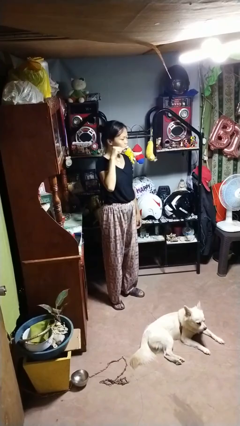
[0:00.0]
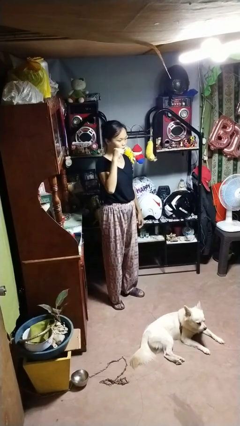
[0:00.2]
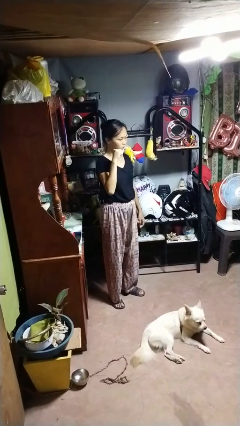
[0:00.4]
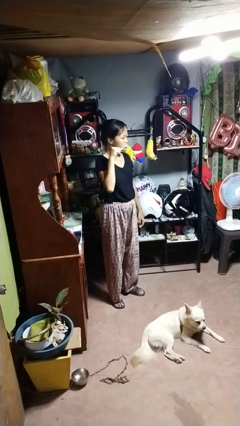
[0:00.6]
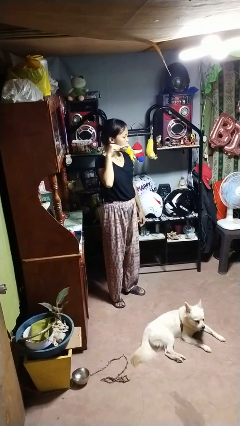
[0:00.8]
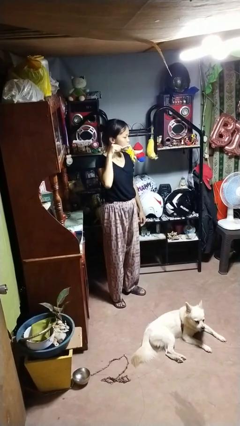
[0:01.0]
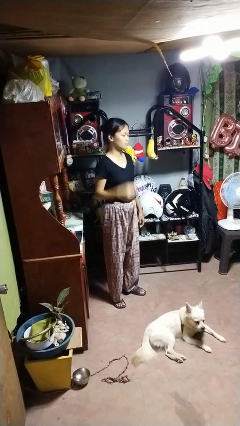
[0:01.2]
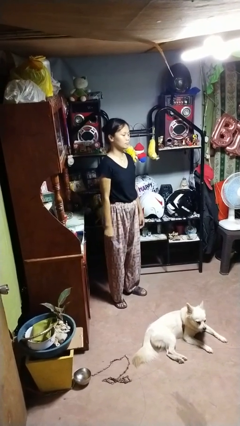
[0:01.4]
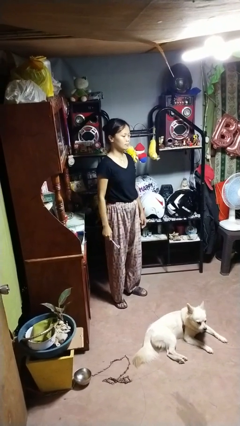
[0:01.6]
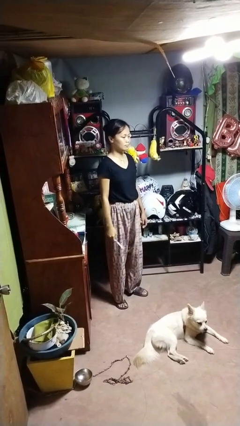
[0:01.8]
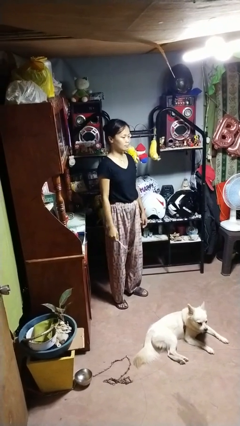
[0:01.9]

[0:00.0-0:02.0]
person brushes teeth

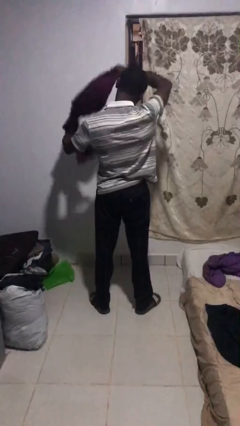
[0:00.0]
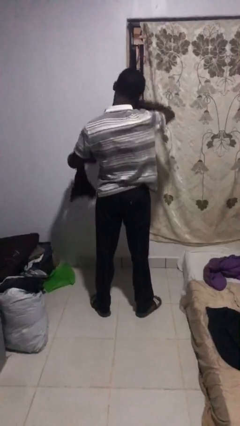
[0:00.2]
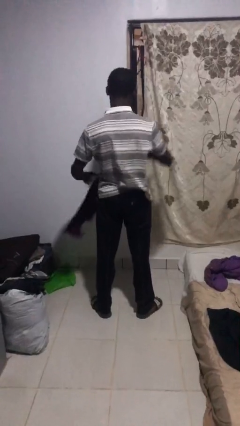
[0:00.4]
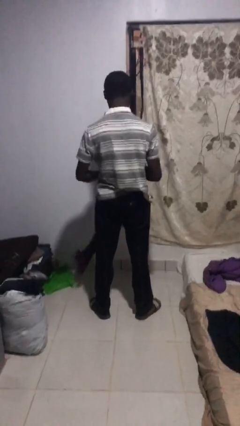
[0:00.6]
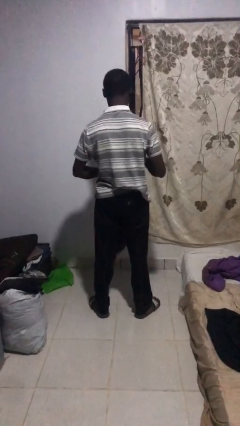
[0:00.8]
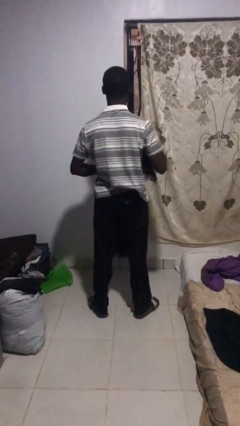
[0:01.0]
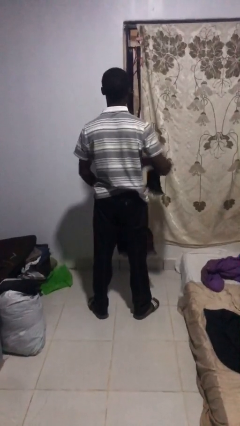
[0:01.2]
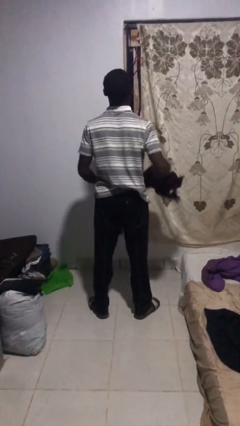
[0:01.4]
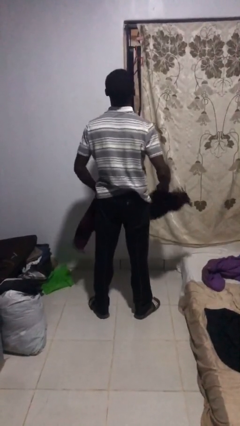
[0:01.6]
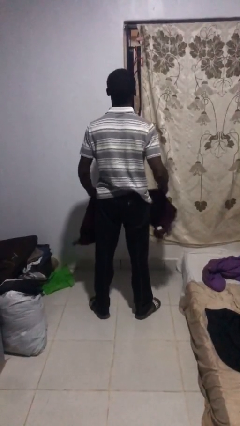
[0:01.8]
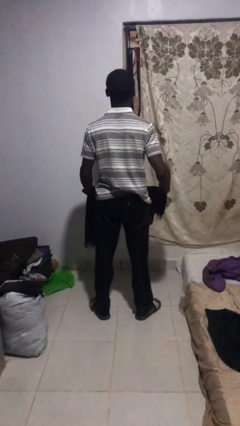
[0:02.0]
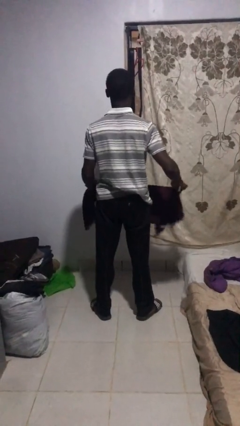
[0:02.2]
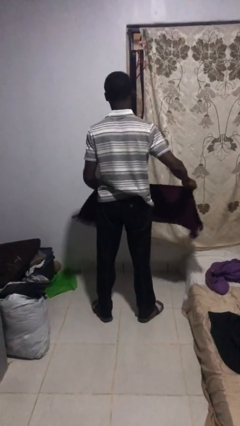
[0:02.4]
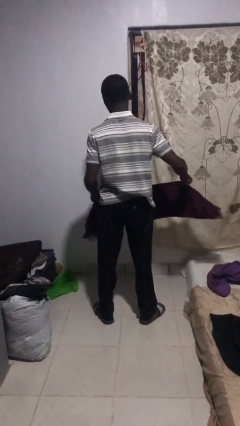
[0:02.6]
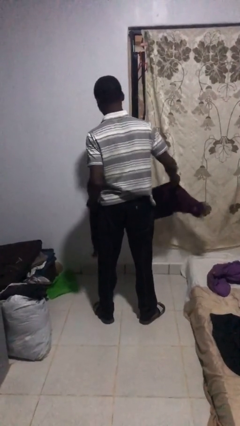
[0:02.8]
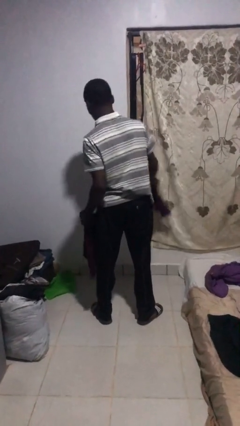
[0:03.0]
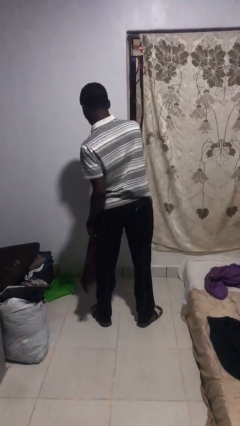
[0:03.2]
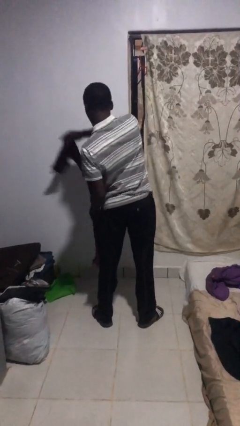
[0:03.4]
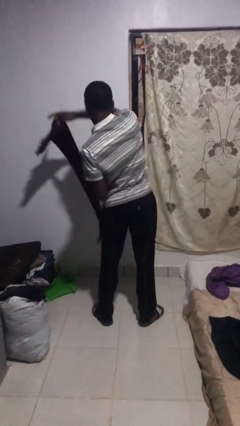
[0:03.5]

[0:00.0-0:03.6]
person takes off scarf

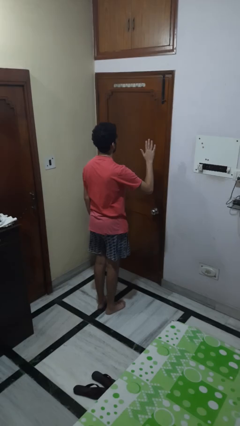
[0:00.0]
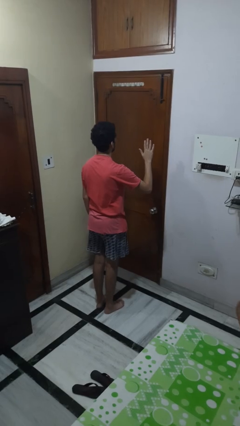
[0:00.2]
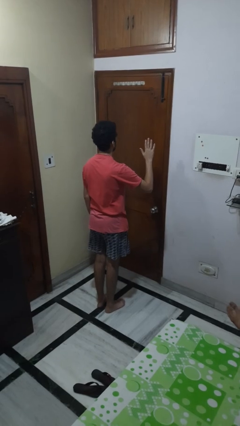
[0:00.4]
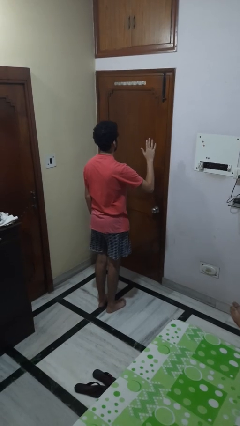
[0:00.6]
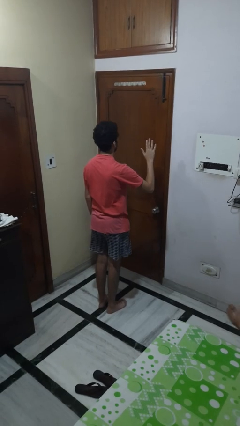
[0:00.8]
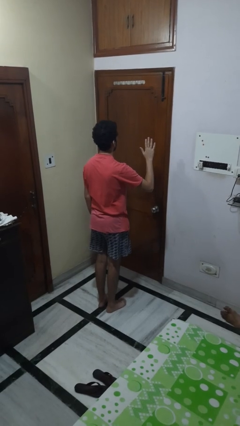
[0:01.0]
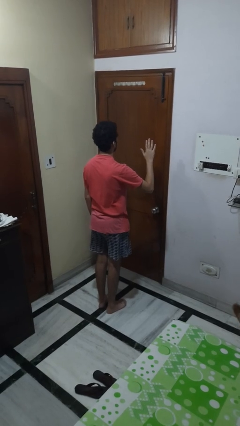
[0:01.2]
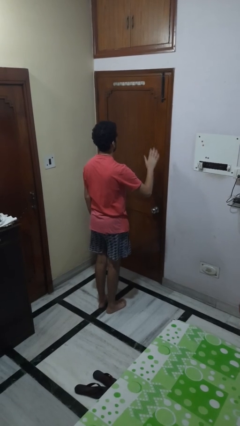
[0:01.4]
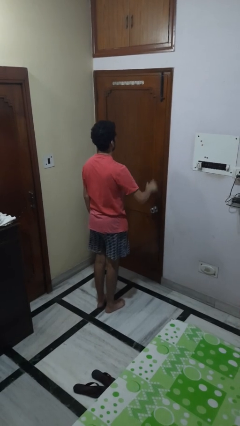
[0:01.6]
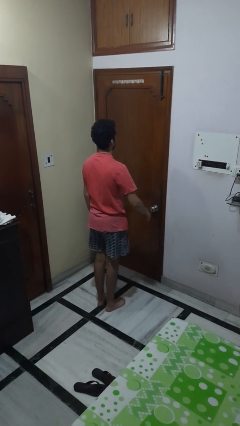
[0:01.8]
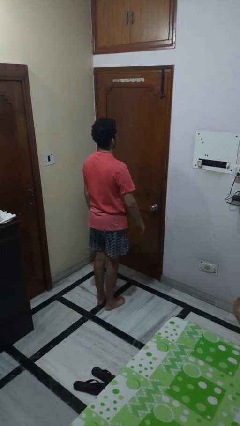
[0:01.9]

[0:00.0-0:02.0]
person gestures stop

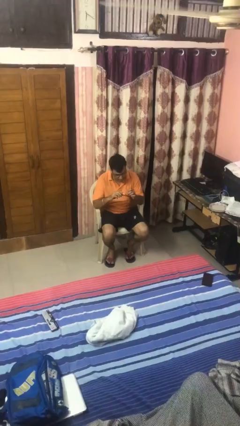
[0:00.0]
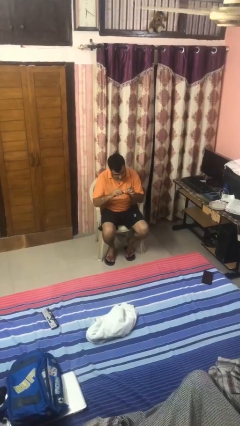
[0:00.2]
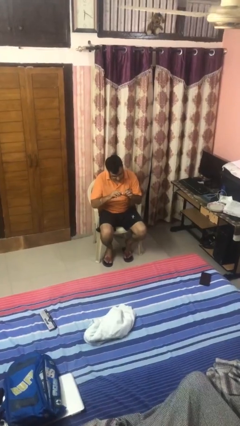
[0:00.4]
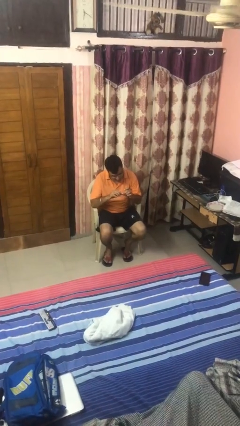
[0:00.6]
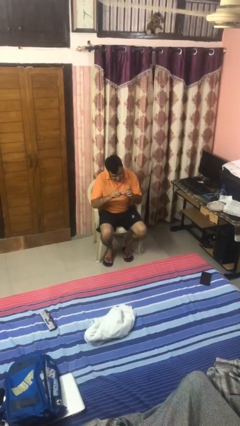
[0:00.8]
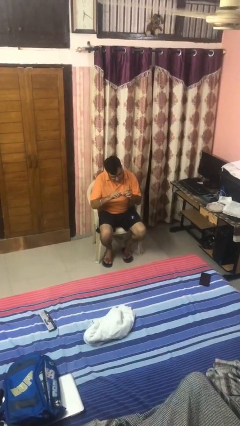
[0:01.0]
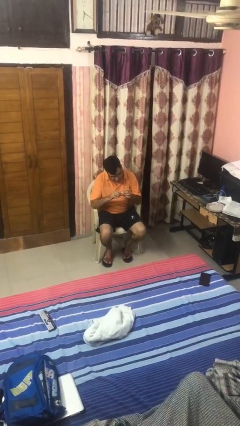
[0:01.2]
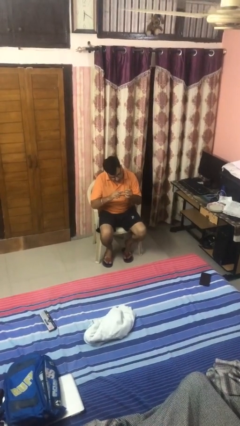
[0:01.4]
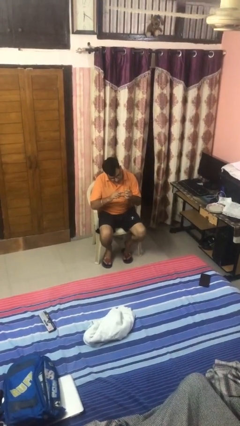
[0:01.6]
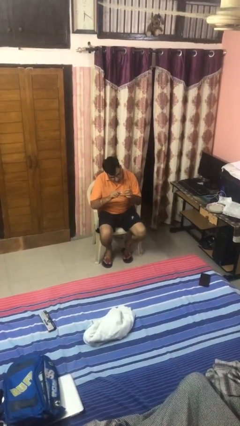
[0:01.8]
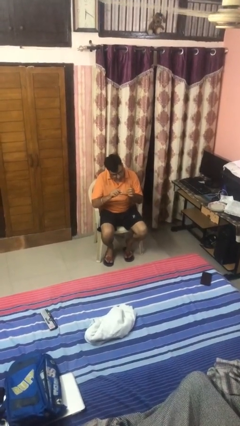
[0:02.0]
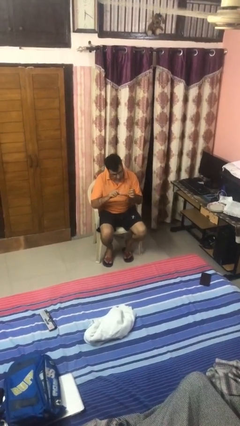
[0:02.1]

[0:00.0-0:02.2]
person clips fingernails

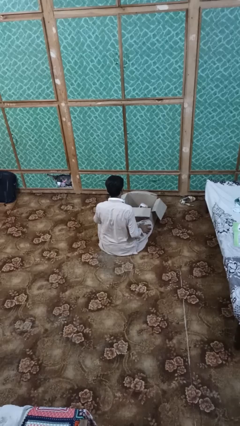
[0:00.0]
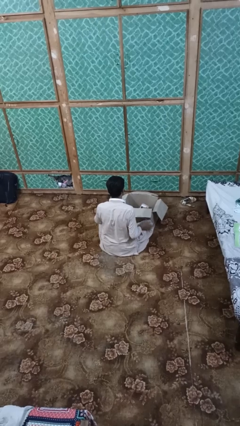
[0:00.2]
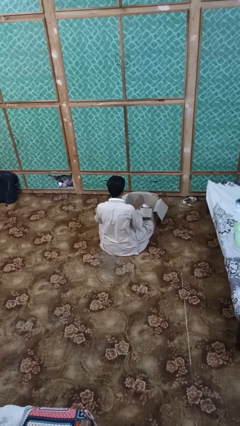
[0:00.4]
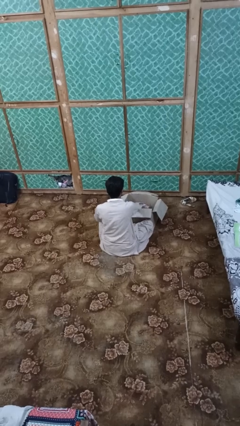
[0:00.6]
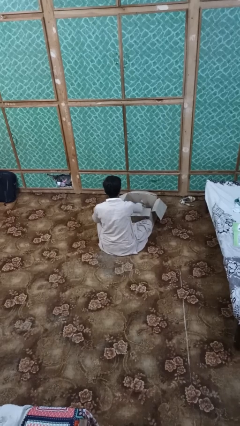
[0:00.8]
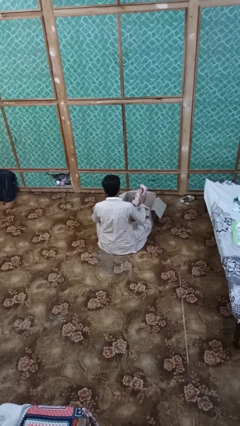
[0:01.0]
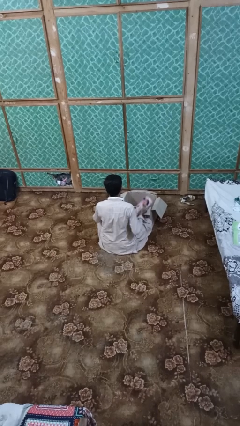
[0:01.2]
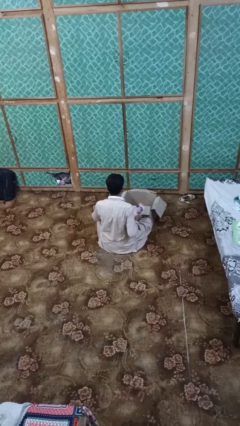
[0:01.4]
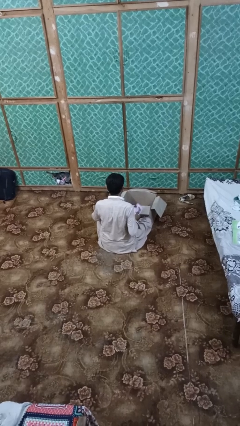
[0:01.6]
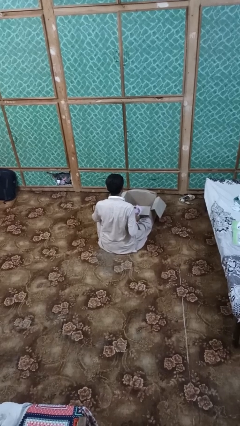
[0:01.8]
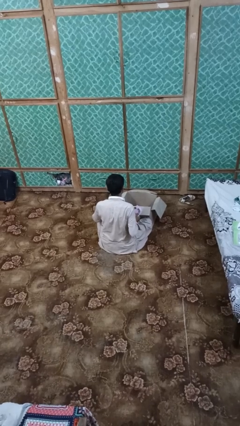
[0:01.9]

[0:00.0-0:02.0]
person takes object from box

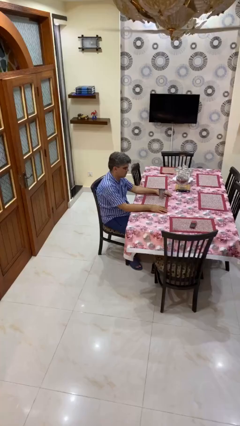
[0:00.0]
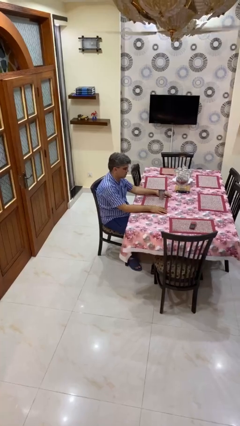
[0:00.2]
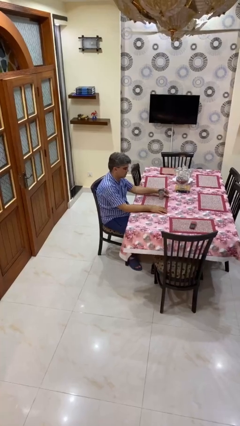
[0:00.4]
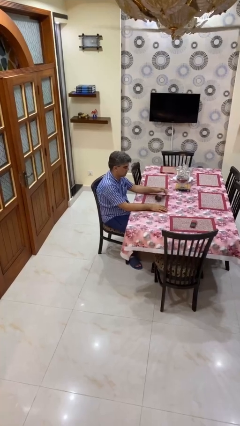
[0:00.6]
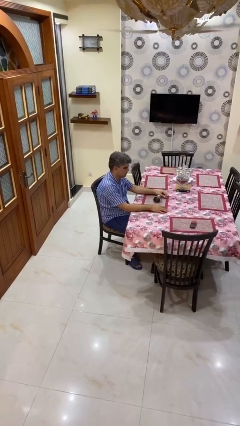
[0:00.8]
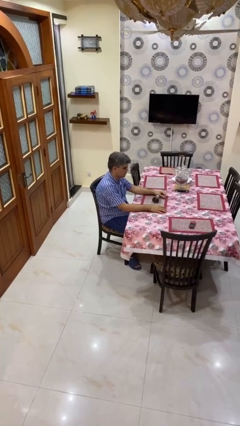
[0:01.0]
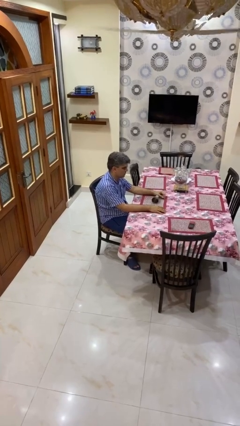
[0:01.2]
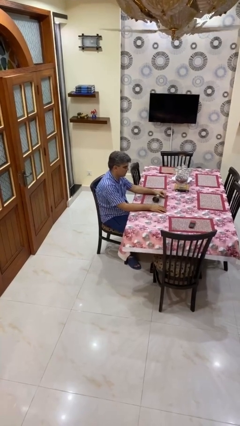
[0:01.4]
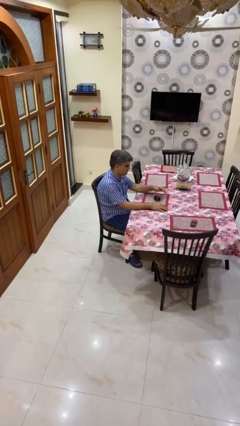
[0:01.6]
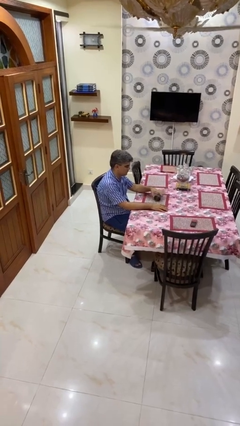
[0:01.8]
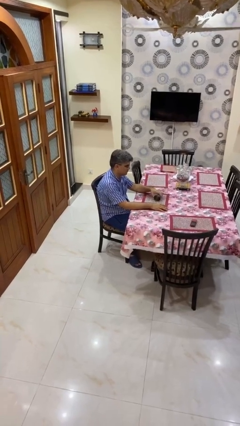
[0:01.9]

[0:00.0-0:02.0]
person knocks over glass

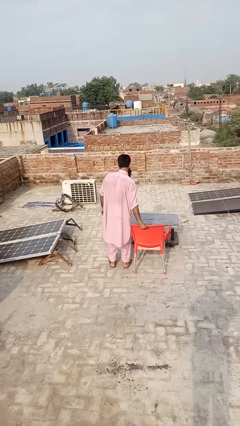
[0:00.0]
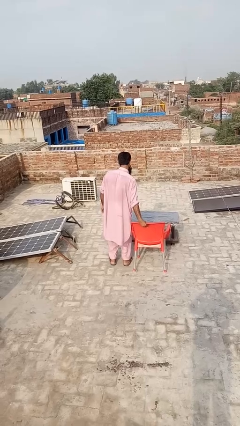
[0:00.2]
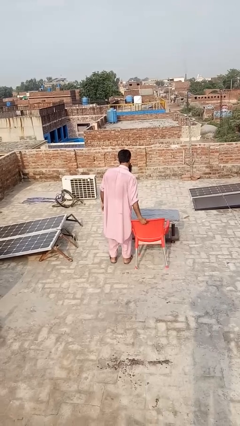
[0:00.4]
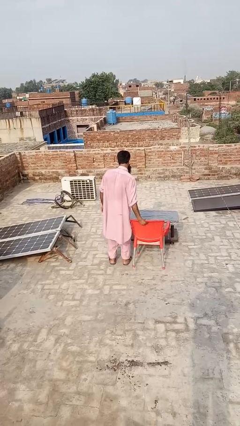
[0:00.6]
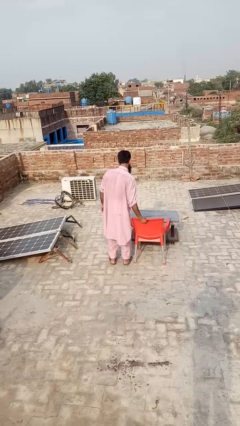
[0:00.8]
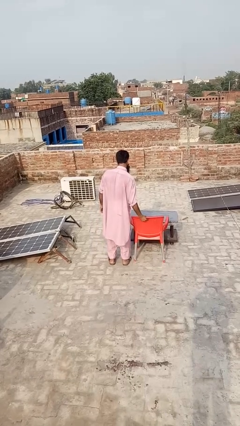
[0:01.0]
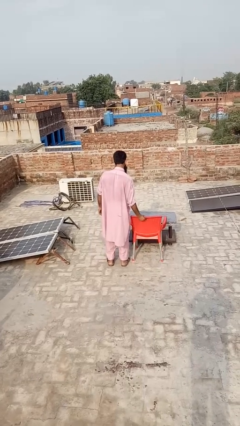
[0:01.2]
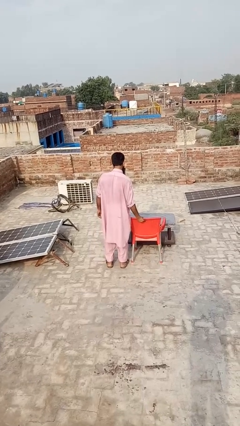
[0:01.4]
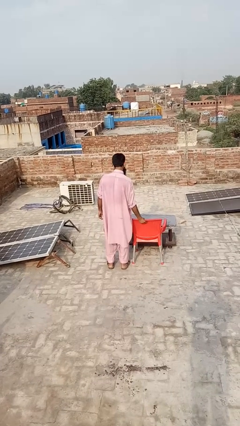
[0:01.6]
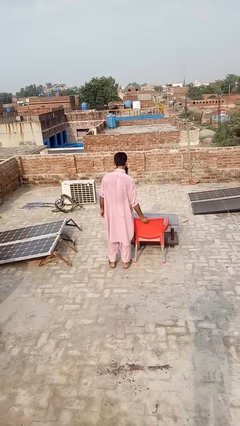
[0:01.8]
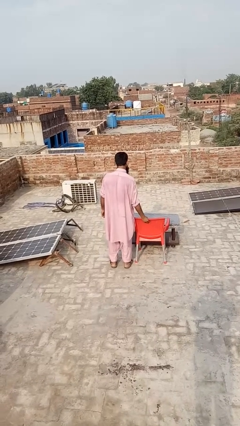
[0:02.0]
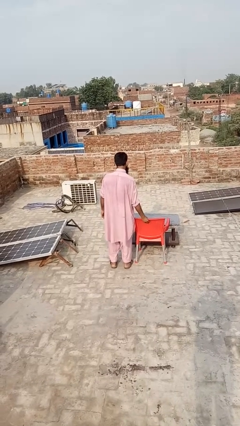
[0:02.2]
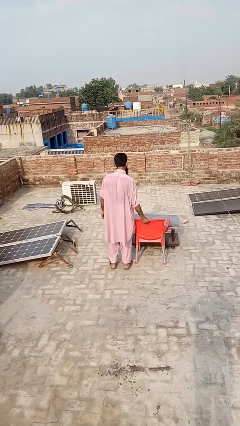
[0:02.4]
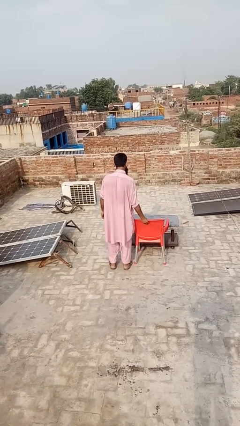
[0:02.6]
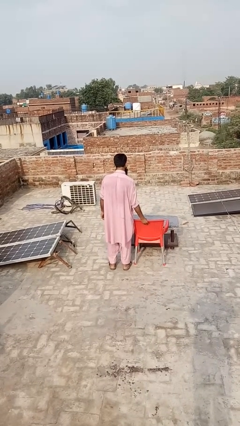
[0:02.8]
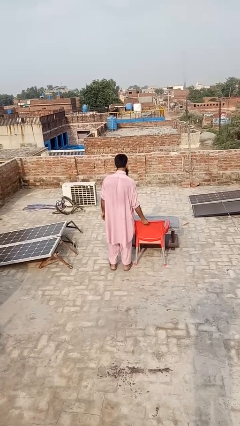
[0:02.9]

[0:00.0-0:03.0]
person pushes in chair
